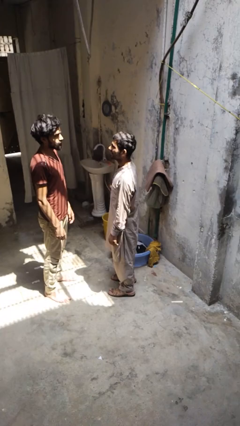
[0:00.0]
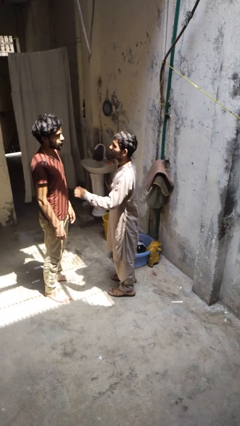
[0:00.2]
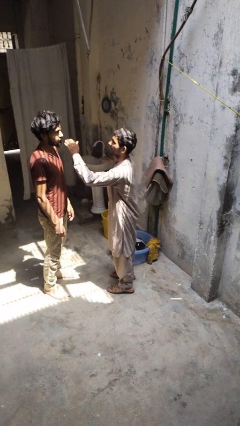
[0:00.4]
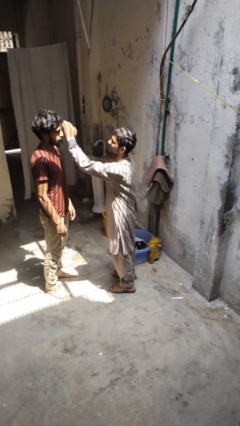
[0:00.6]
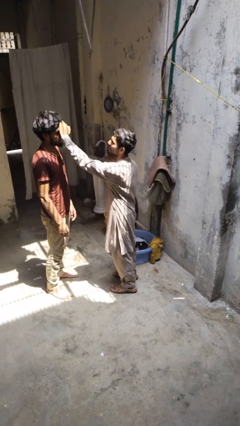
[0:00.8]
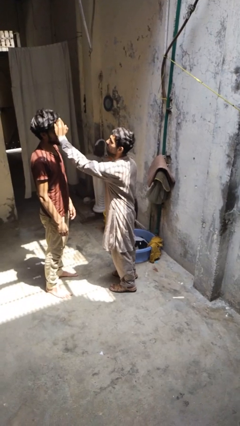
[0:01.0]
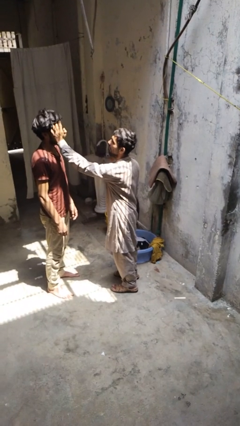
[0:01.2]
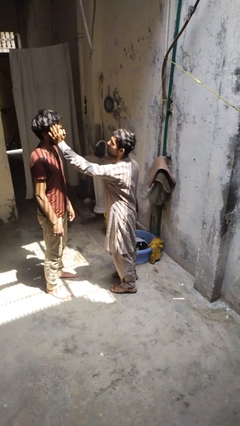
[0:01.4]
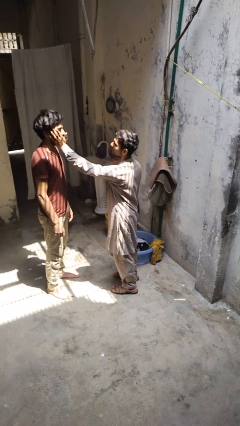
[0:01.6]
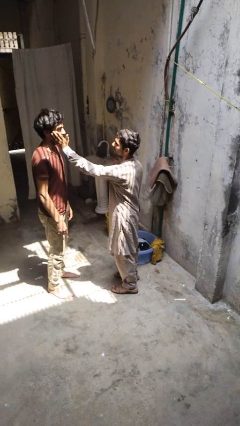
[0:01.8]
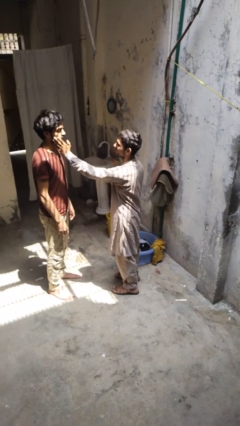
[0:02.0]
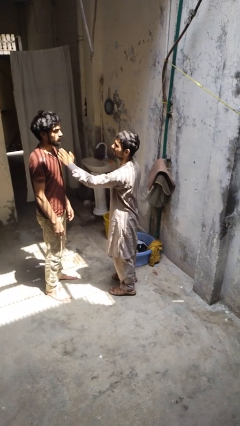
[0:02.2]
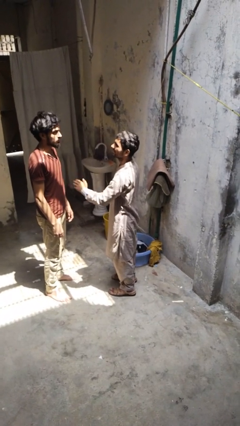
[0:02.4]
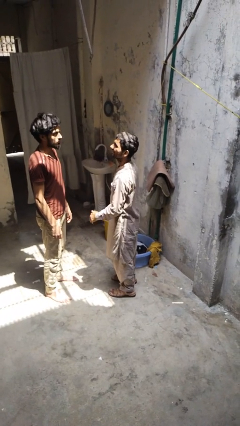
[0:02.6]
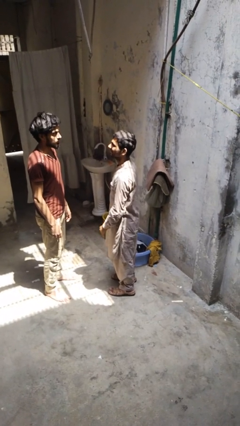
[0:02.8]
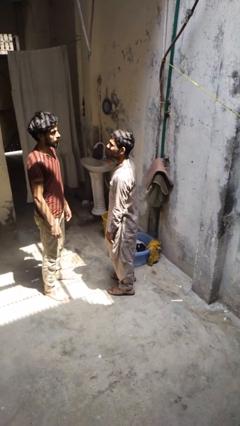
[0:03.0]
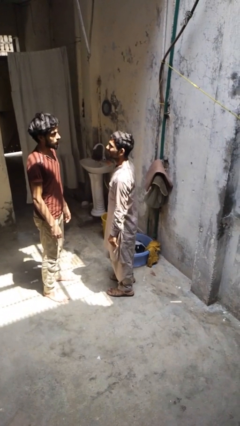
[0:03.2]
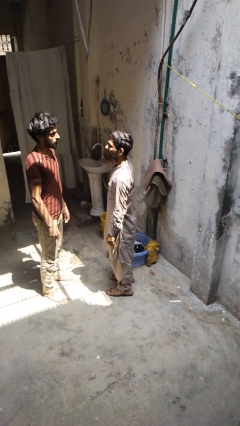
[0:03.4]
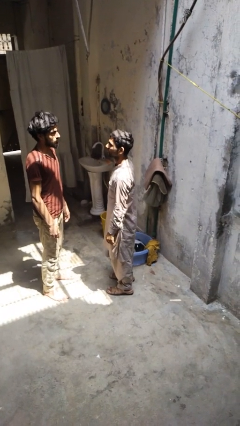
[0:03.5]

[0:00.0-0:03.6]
person touches face of person

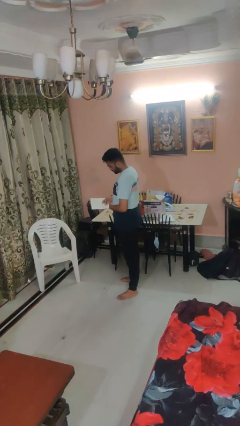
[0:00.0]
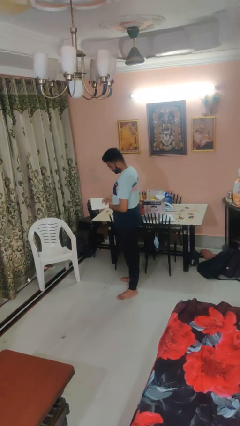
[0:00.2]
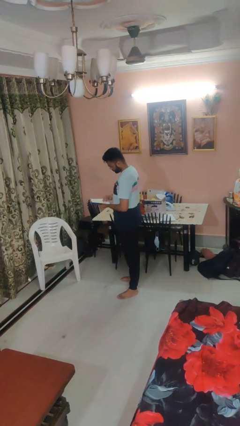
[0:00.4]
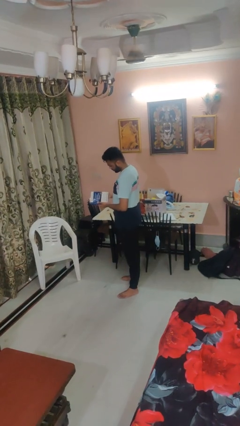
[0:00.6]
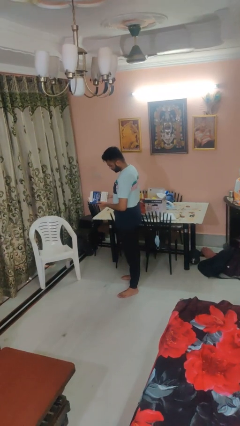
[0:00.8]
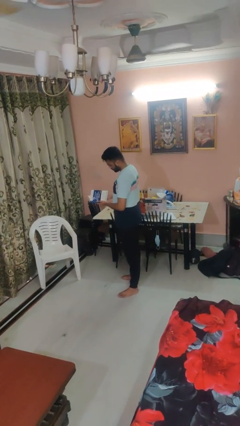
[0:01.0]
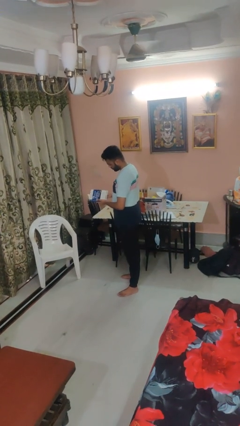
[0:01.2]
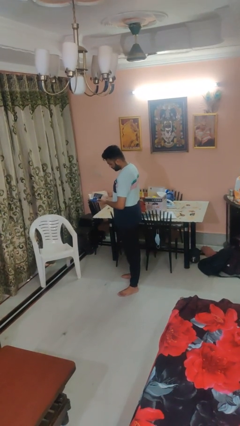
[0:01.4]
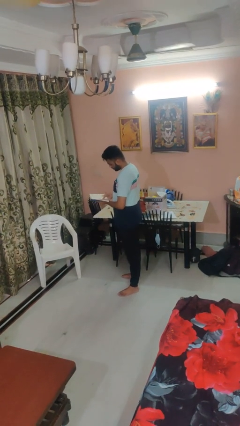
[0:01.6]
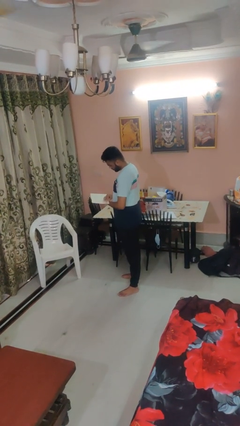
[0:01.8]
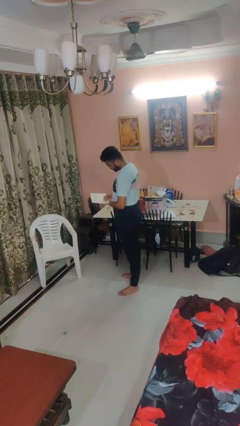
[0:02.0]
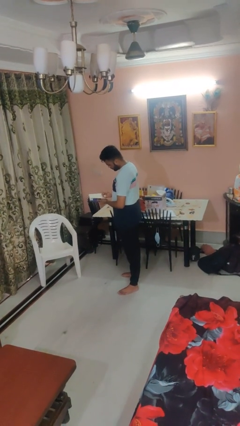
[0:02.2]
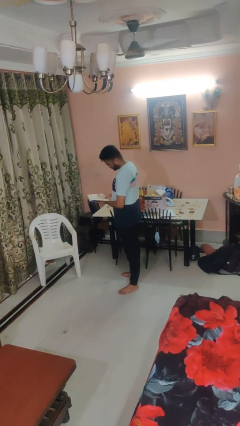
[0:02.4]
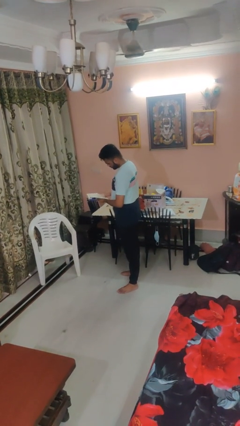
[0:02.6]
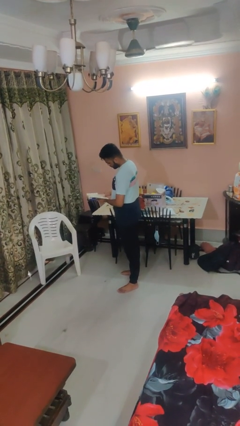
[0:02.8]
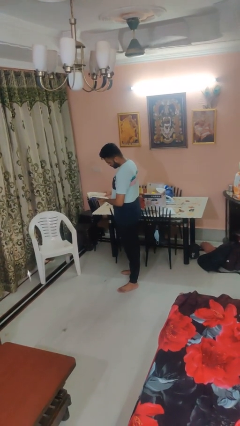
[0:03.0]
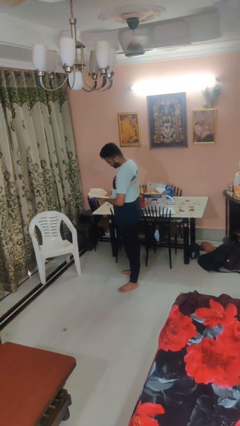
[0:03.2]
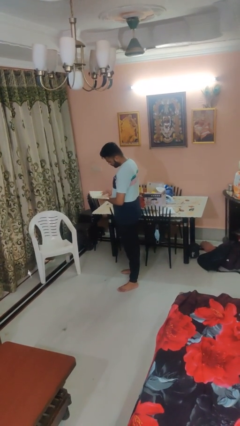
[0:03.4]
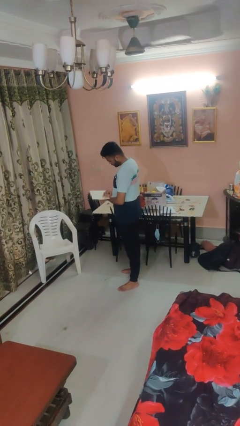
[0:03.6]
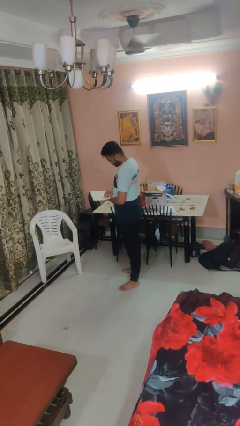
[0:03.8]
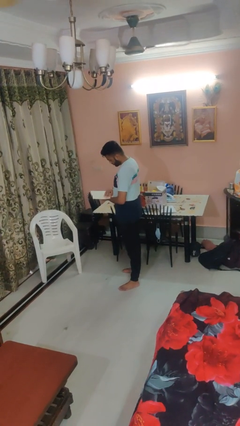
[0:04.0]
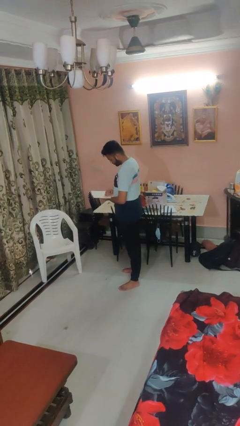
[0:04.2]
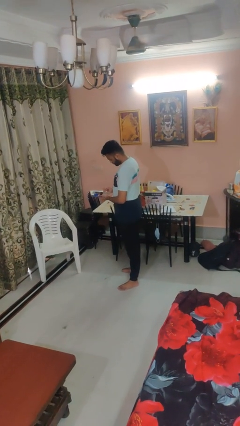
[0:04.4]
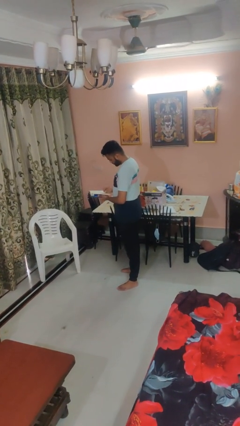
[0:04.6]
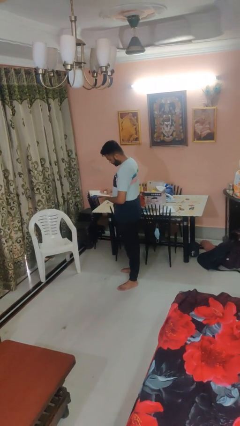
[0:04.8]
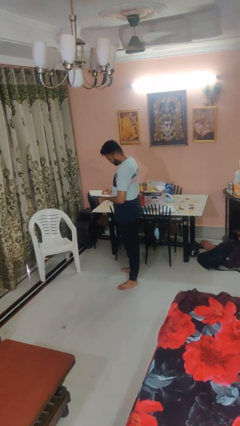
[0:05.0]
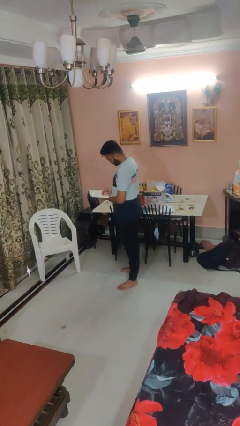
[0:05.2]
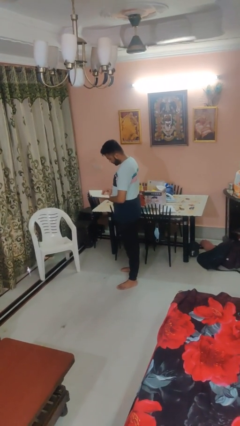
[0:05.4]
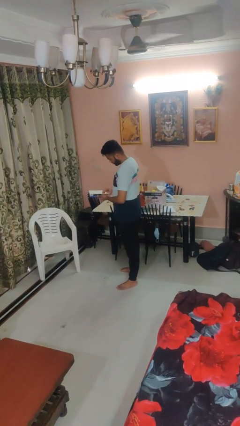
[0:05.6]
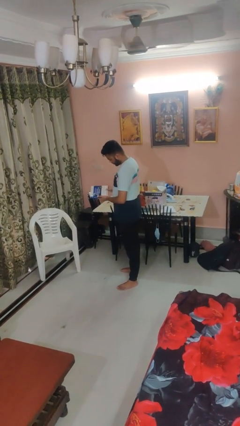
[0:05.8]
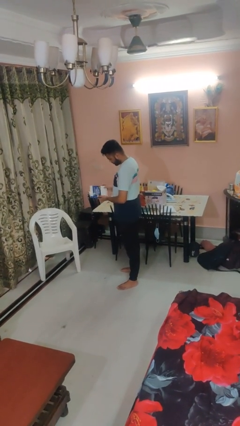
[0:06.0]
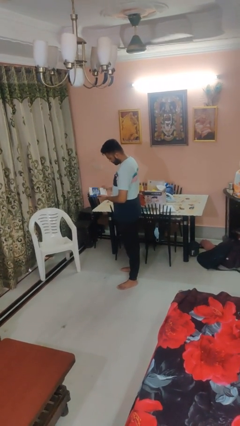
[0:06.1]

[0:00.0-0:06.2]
person reads book

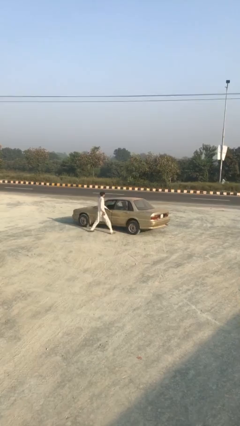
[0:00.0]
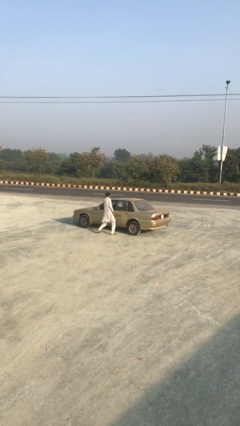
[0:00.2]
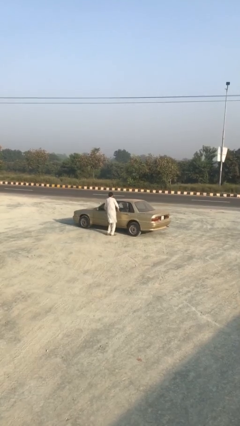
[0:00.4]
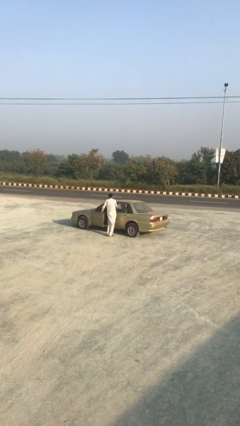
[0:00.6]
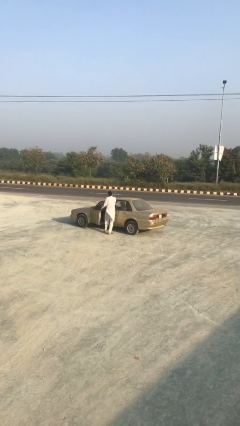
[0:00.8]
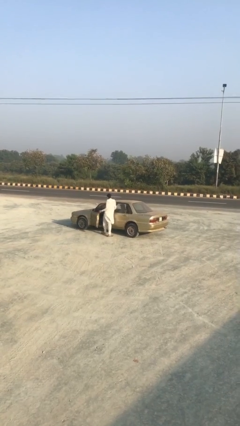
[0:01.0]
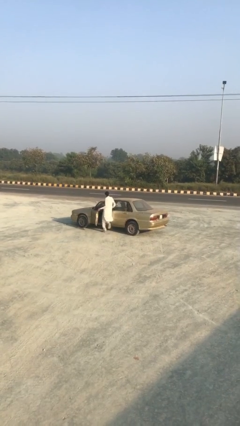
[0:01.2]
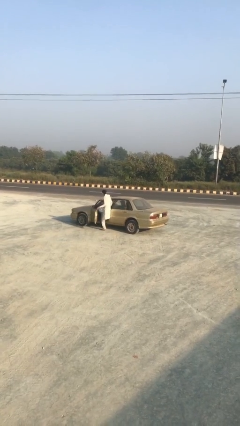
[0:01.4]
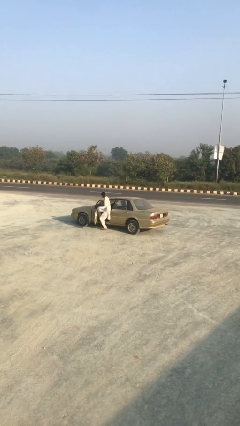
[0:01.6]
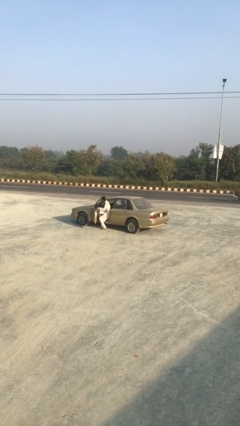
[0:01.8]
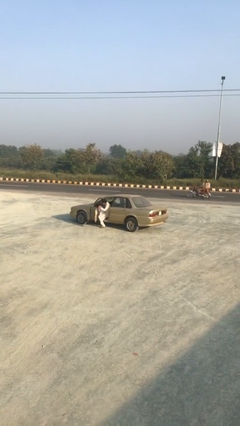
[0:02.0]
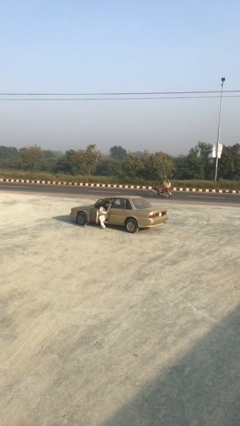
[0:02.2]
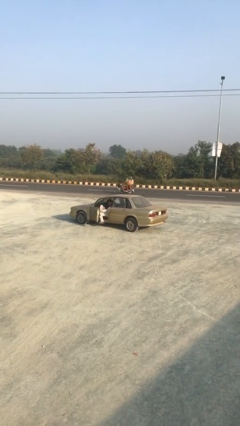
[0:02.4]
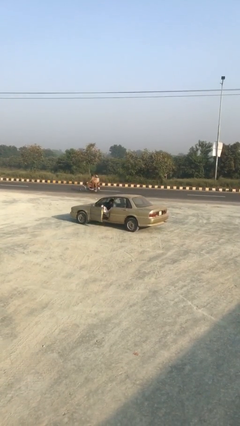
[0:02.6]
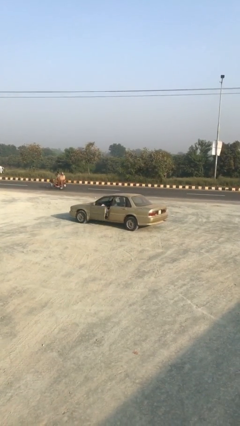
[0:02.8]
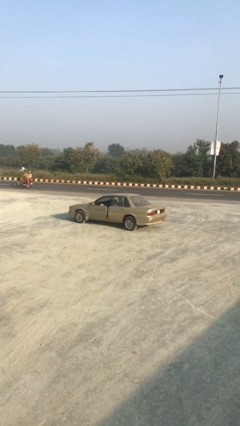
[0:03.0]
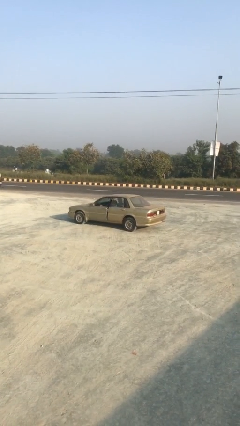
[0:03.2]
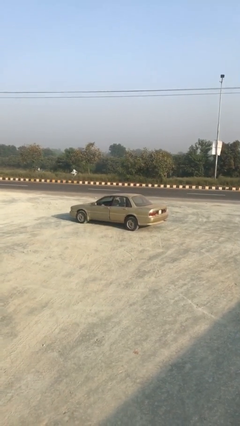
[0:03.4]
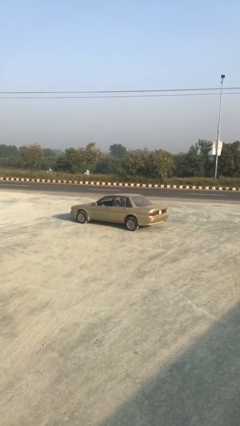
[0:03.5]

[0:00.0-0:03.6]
car picks up person

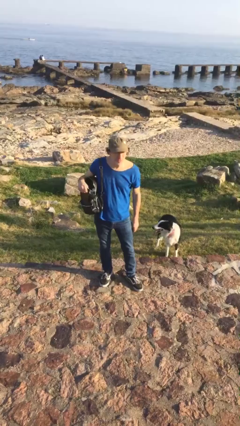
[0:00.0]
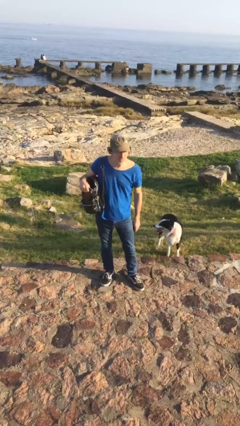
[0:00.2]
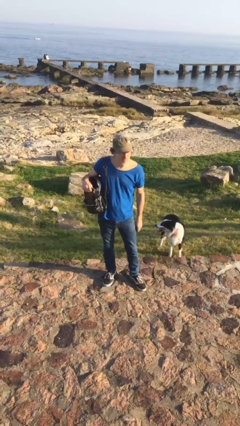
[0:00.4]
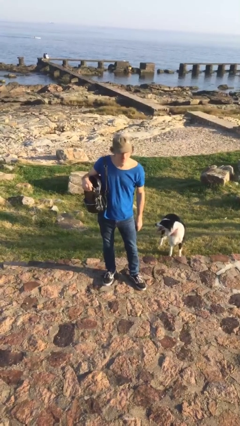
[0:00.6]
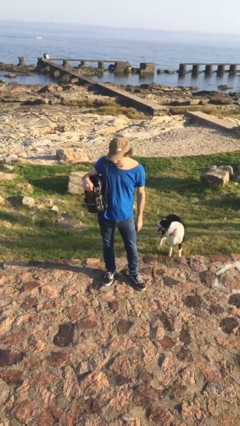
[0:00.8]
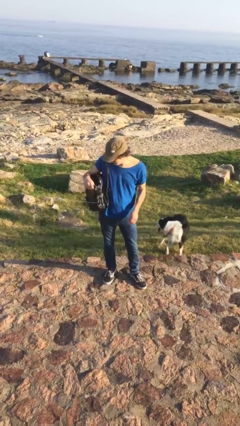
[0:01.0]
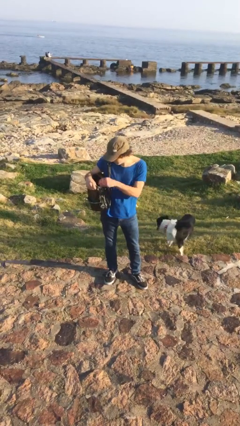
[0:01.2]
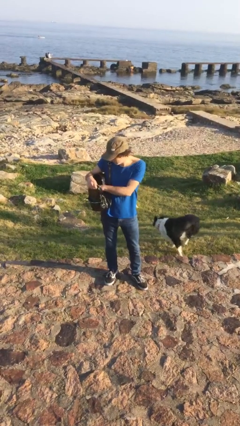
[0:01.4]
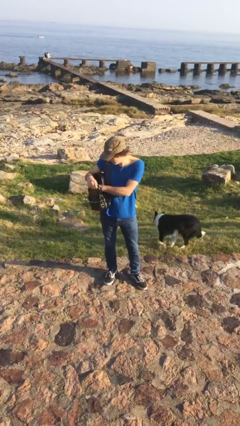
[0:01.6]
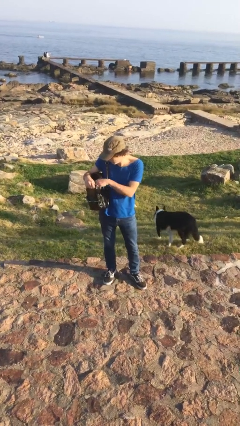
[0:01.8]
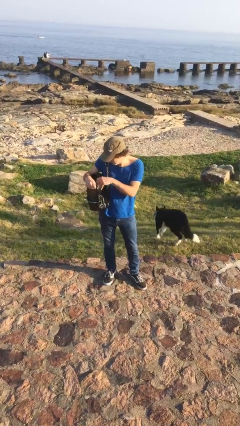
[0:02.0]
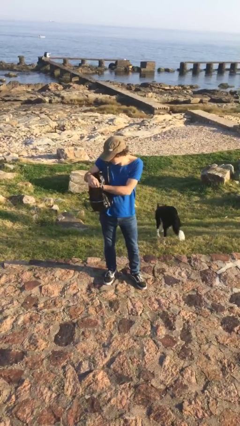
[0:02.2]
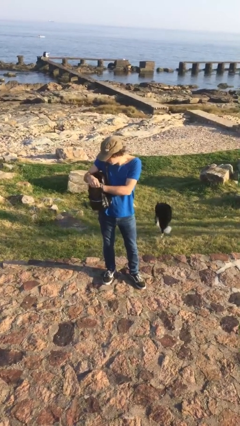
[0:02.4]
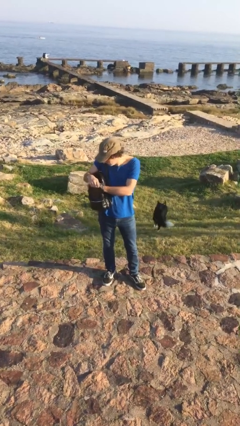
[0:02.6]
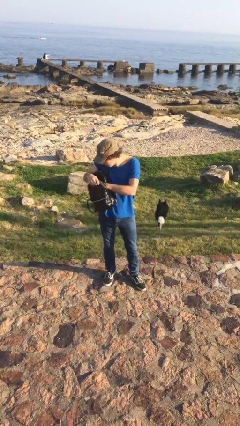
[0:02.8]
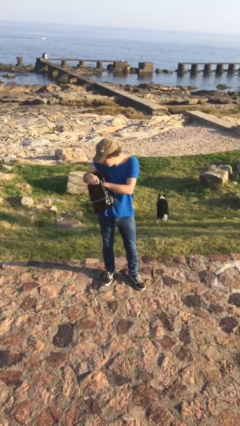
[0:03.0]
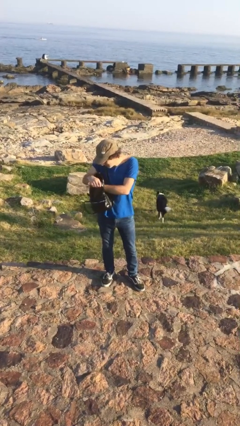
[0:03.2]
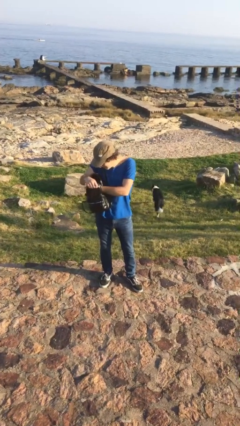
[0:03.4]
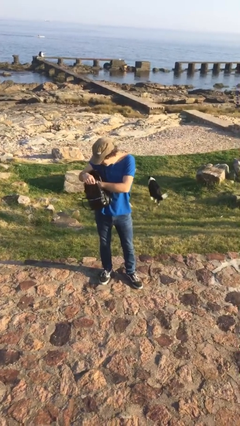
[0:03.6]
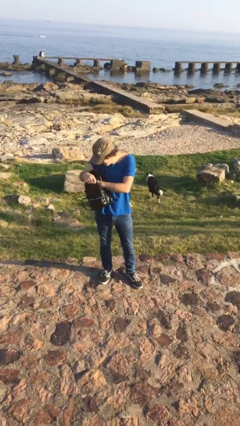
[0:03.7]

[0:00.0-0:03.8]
person searches in purse
